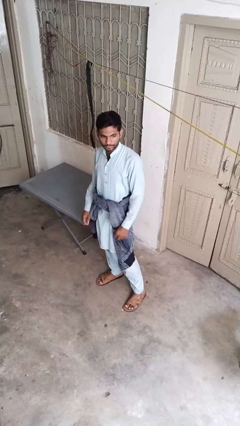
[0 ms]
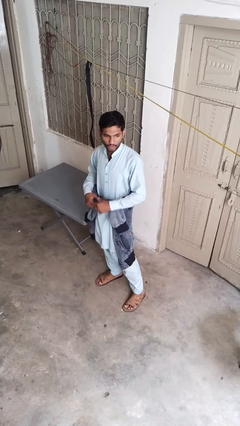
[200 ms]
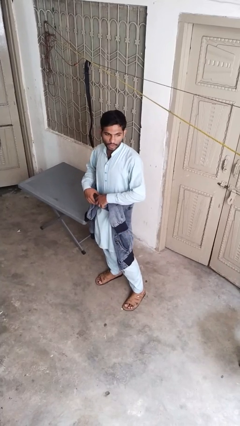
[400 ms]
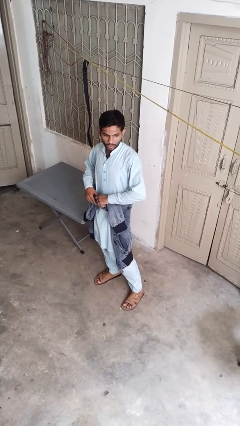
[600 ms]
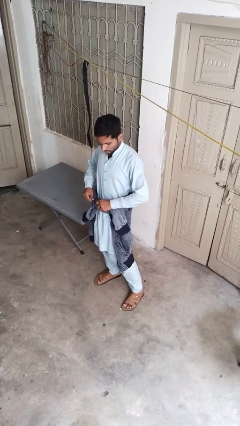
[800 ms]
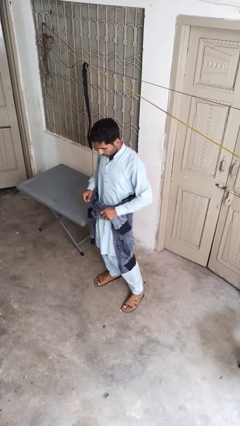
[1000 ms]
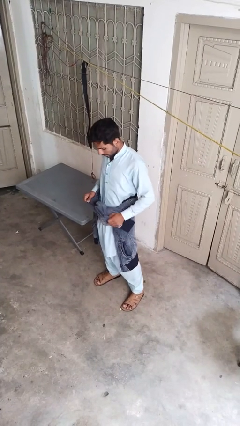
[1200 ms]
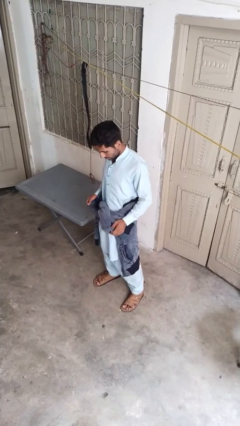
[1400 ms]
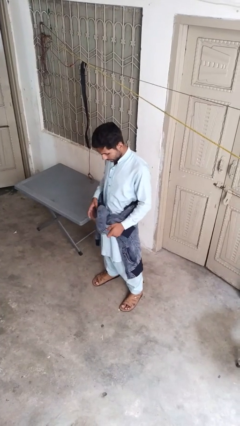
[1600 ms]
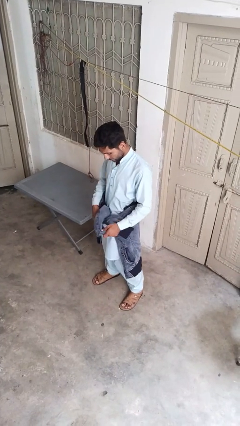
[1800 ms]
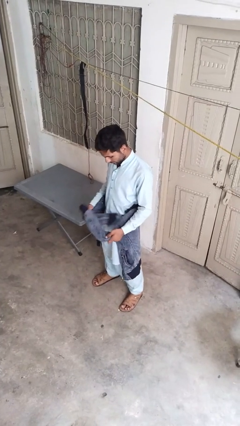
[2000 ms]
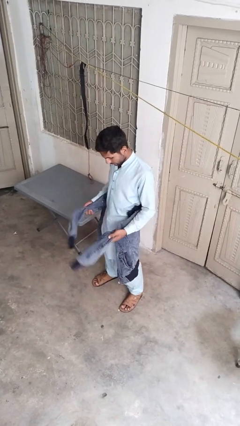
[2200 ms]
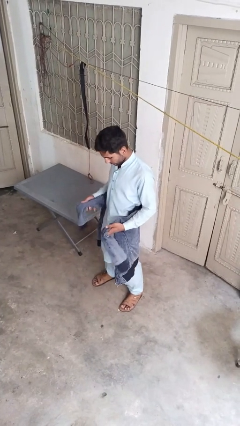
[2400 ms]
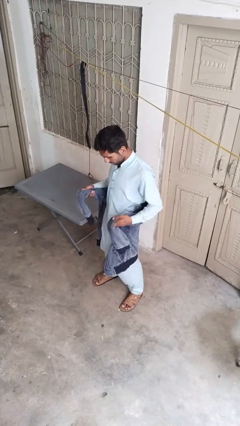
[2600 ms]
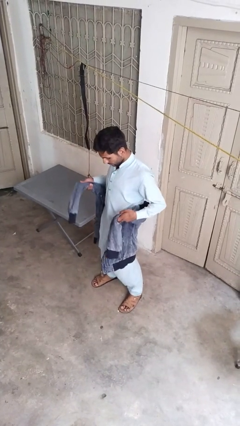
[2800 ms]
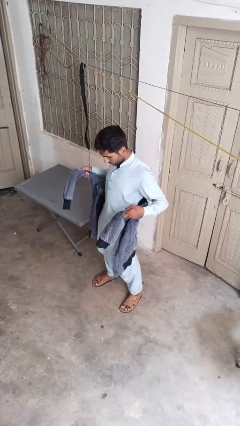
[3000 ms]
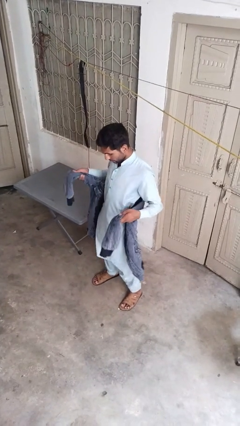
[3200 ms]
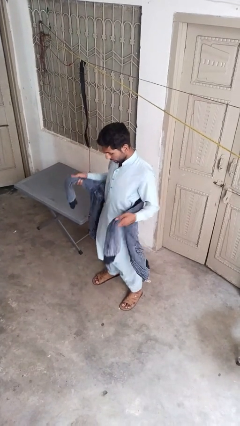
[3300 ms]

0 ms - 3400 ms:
person unties jacket around waist

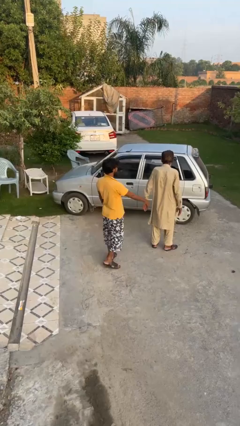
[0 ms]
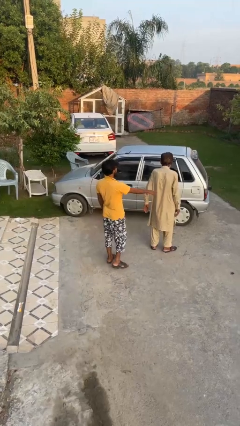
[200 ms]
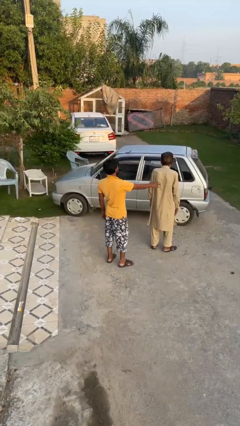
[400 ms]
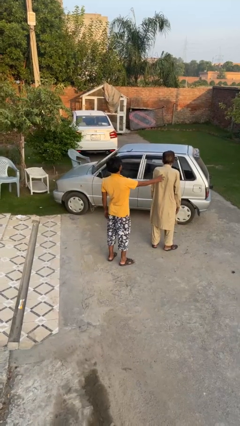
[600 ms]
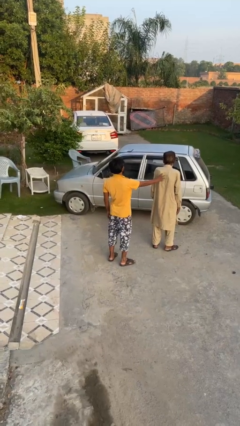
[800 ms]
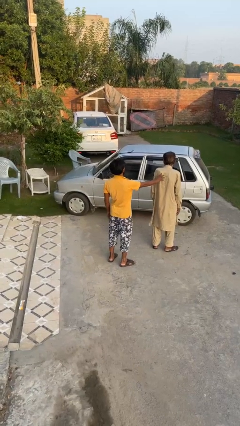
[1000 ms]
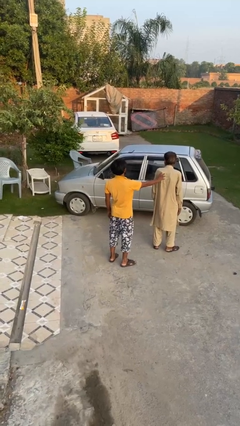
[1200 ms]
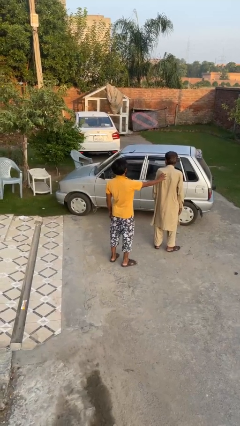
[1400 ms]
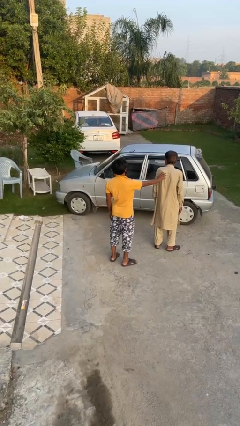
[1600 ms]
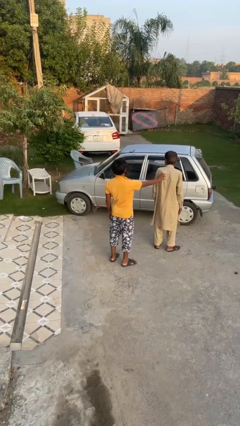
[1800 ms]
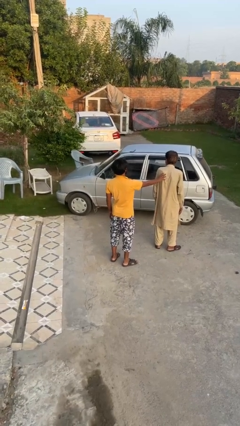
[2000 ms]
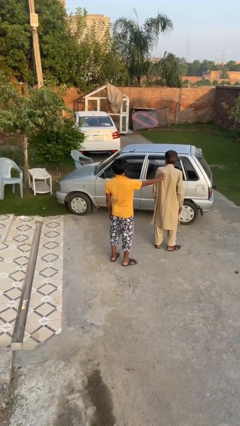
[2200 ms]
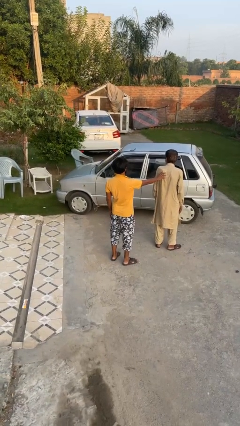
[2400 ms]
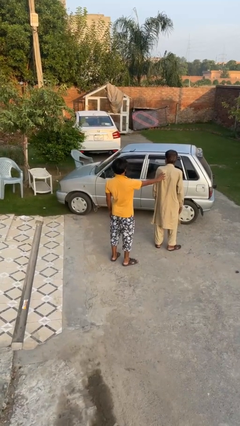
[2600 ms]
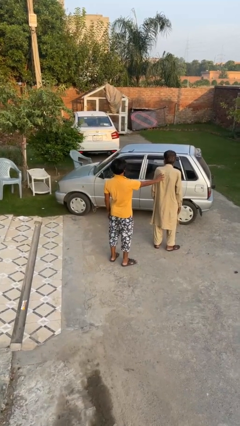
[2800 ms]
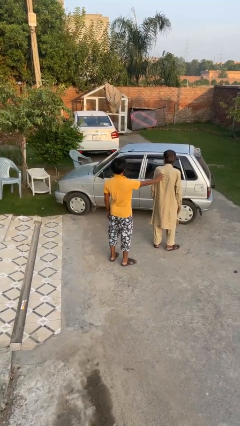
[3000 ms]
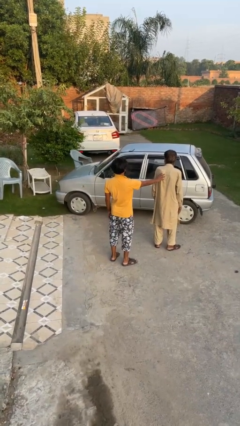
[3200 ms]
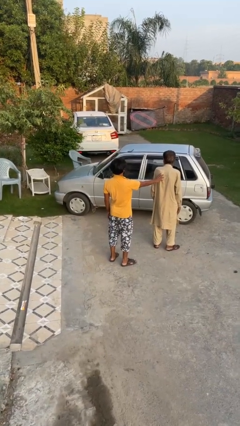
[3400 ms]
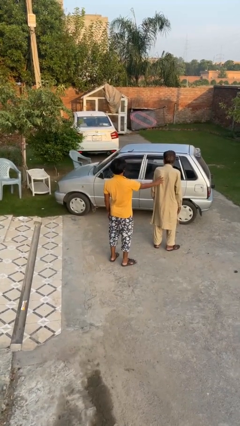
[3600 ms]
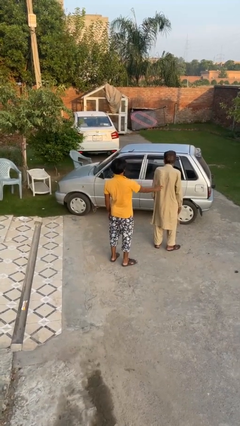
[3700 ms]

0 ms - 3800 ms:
person touches back of person

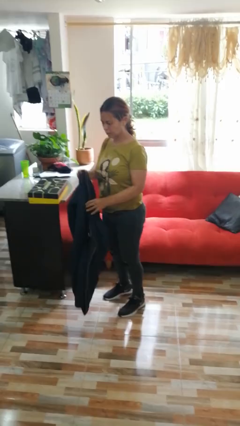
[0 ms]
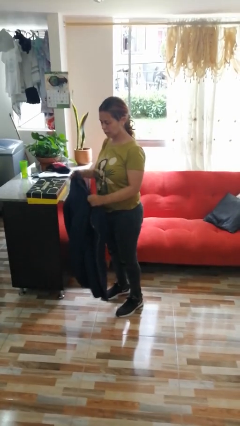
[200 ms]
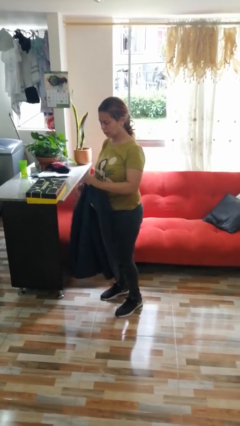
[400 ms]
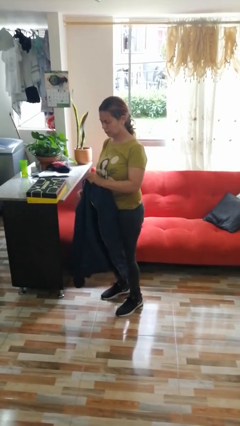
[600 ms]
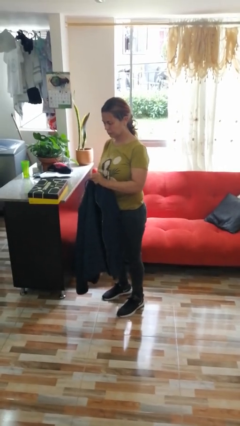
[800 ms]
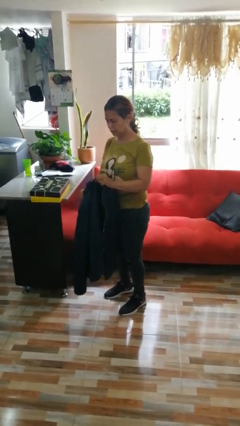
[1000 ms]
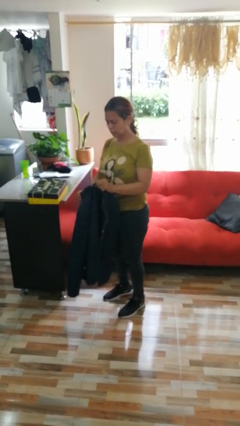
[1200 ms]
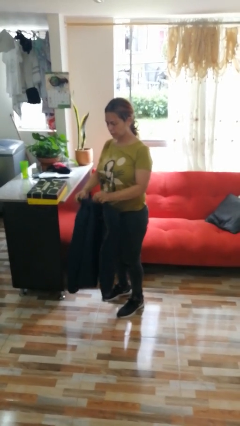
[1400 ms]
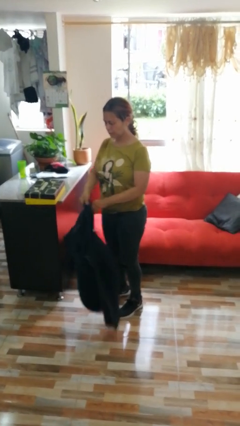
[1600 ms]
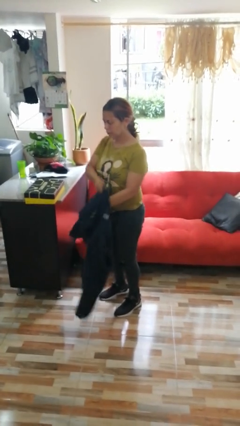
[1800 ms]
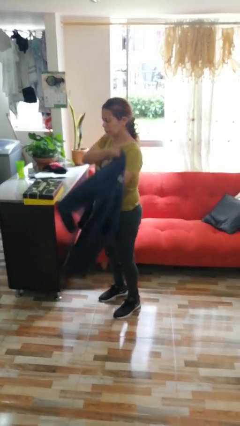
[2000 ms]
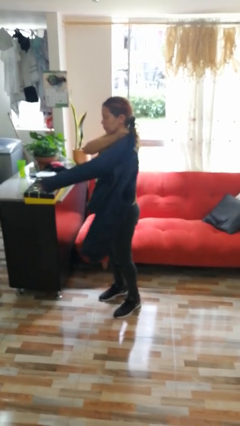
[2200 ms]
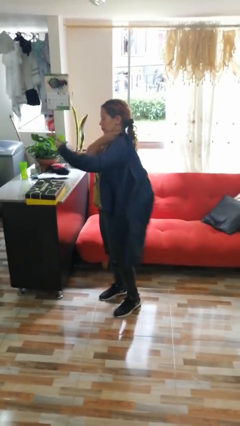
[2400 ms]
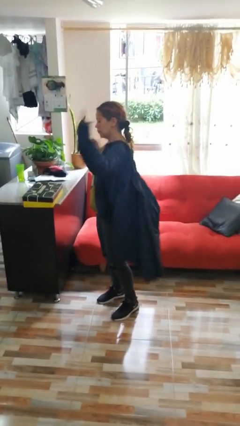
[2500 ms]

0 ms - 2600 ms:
person takes off jacket

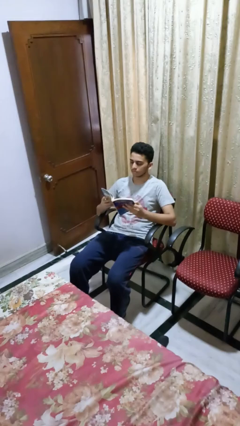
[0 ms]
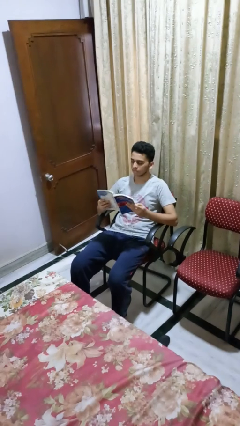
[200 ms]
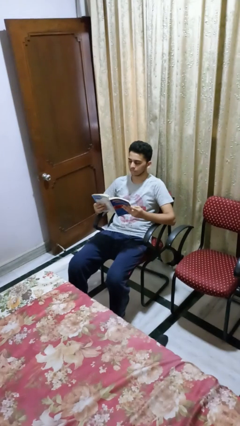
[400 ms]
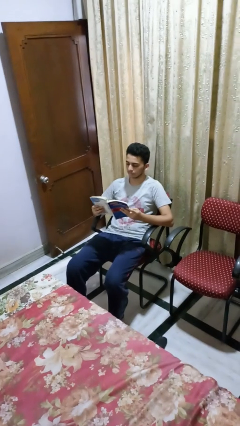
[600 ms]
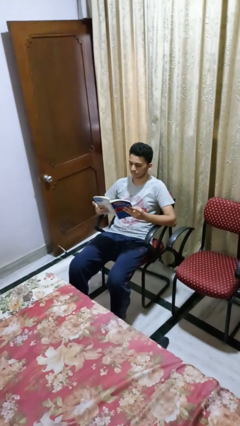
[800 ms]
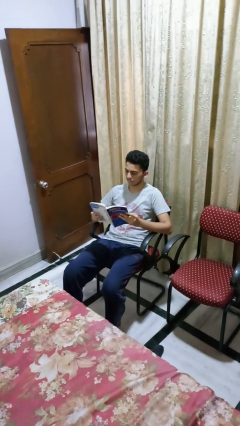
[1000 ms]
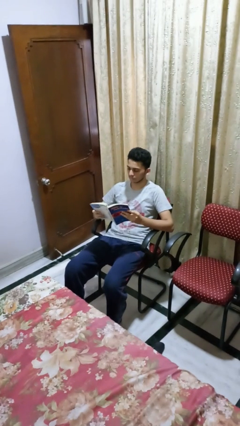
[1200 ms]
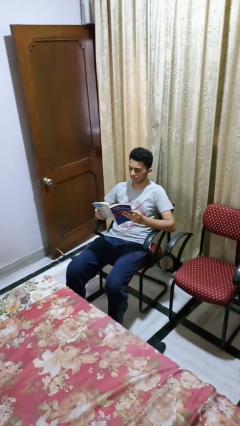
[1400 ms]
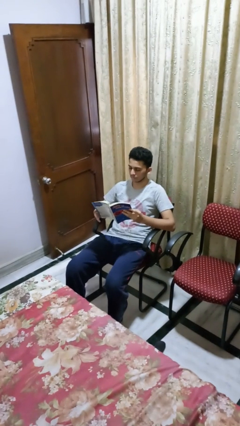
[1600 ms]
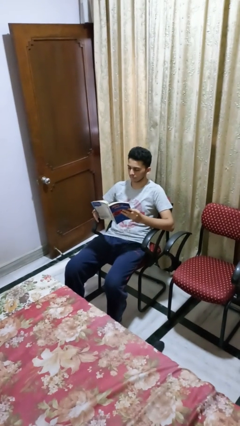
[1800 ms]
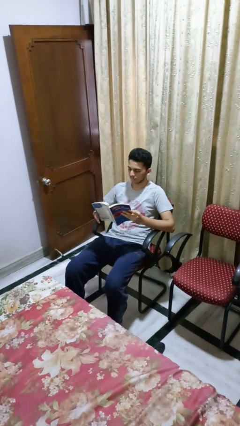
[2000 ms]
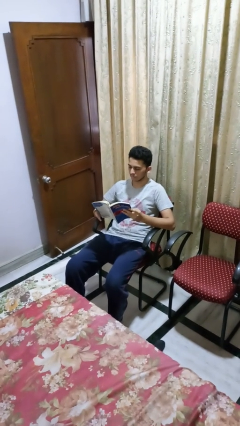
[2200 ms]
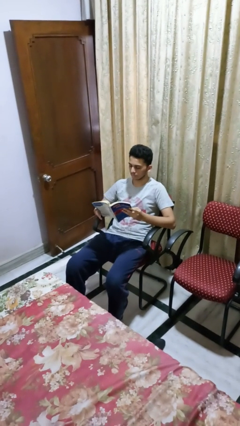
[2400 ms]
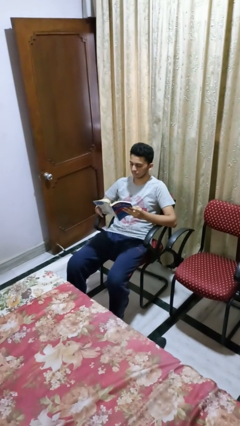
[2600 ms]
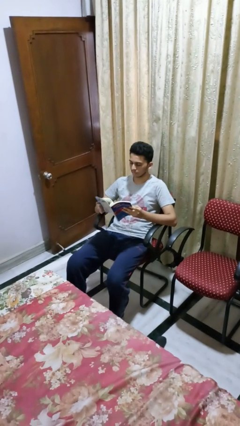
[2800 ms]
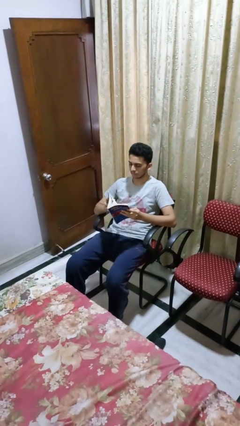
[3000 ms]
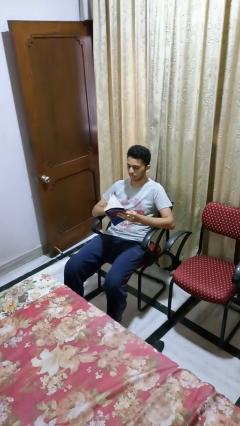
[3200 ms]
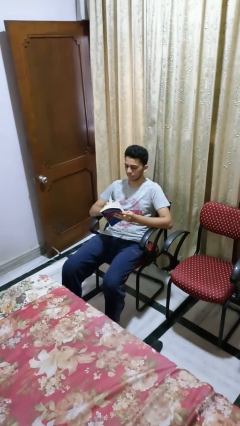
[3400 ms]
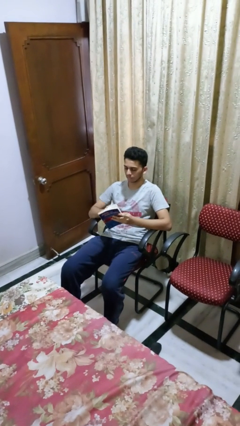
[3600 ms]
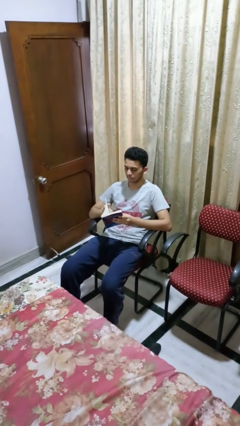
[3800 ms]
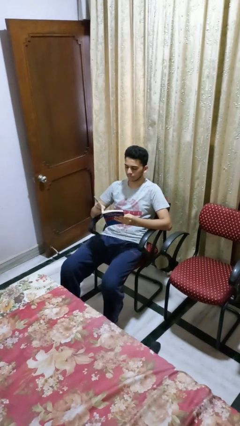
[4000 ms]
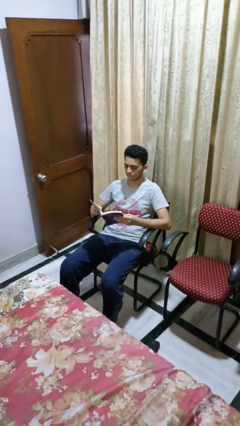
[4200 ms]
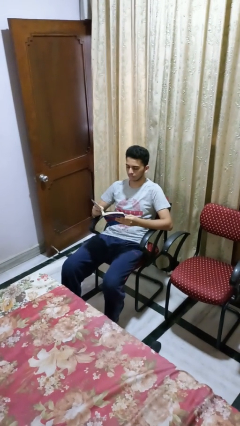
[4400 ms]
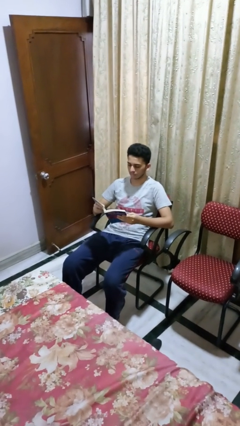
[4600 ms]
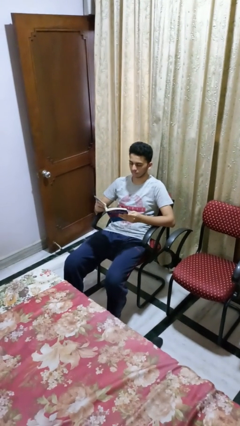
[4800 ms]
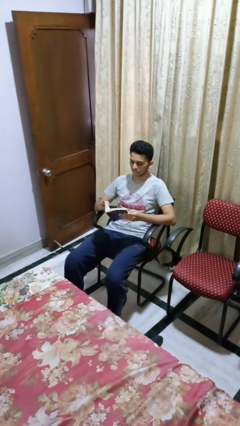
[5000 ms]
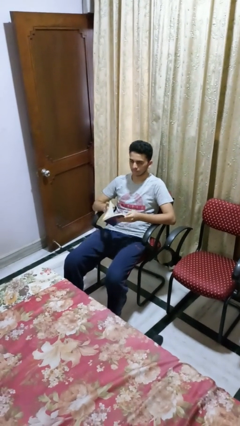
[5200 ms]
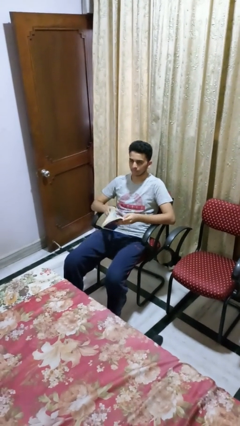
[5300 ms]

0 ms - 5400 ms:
person reads book

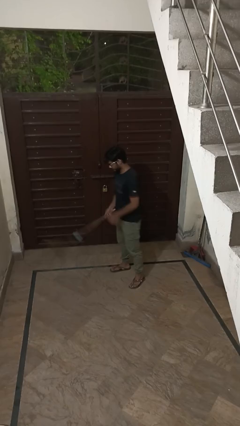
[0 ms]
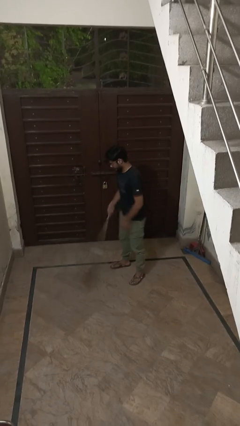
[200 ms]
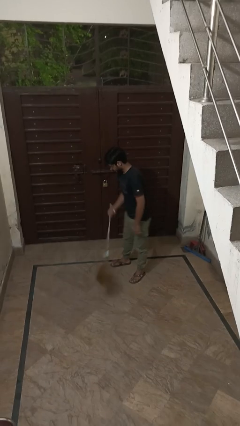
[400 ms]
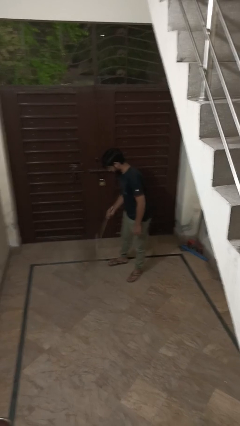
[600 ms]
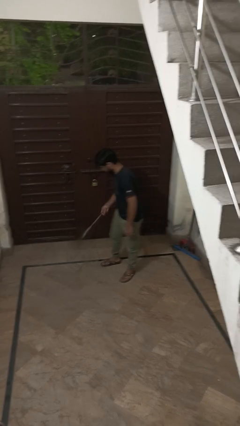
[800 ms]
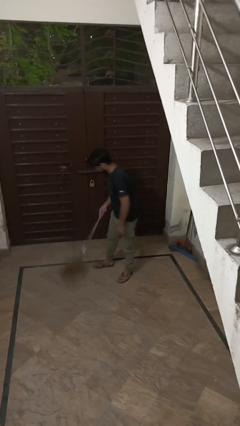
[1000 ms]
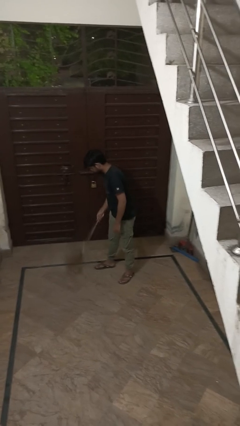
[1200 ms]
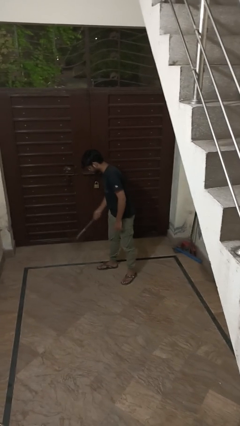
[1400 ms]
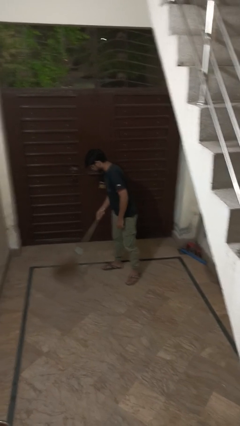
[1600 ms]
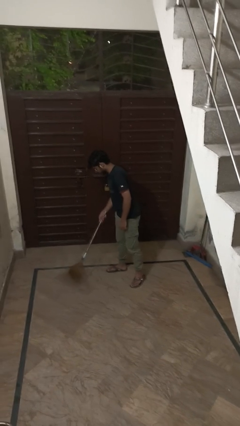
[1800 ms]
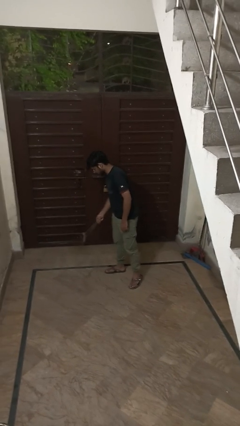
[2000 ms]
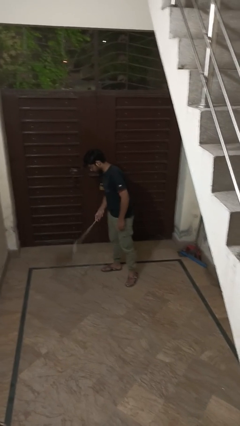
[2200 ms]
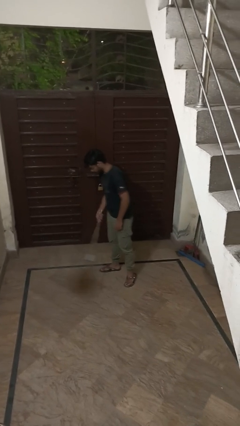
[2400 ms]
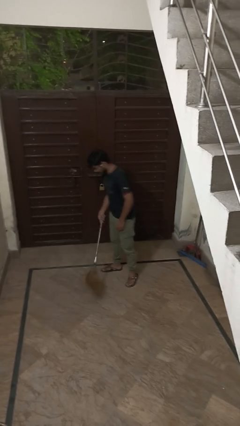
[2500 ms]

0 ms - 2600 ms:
person sweeps floor

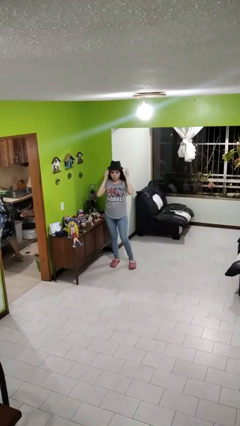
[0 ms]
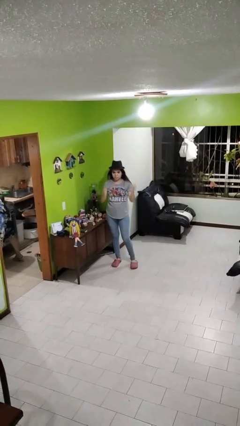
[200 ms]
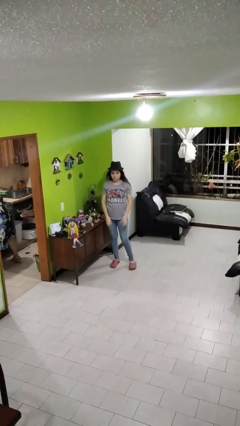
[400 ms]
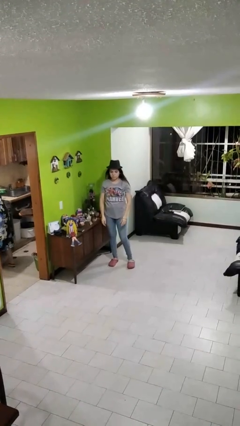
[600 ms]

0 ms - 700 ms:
person puts on hat
